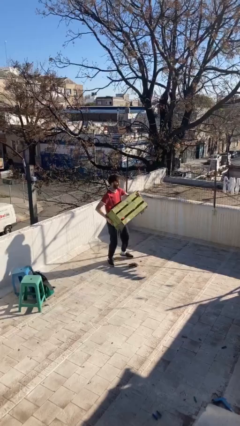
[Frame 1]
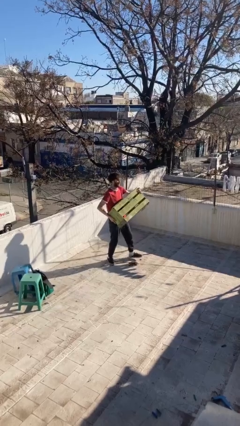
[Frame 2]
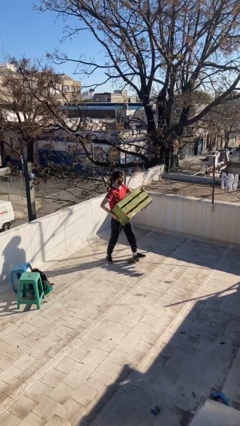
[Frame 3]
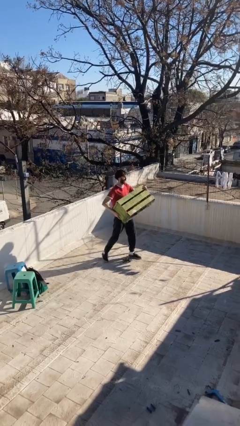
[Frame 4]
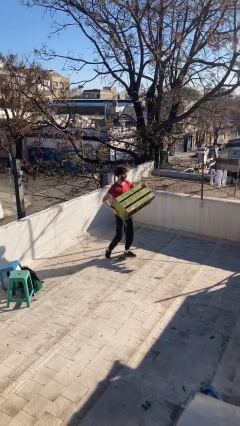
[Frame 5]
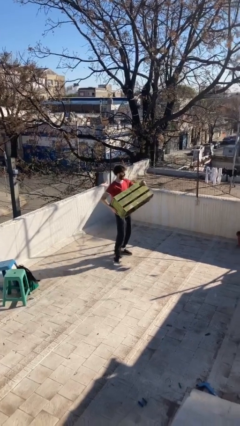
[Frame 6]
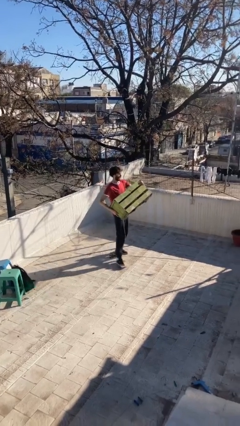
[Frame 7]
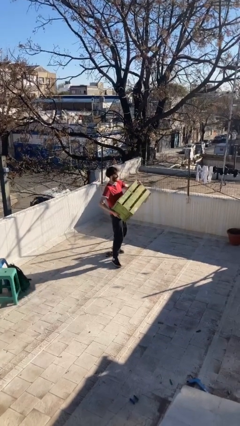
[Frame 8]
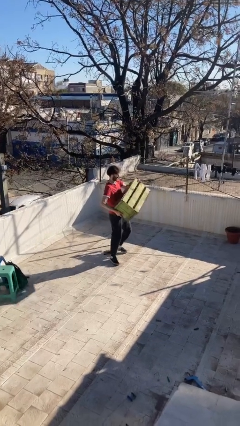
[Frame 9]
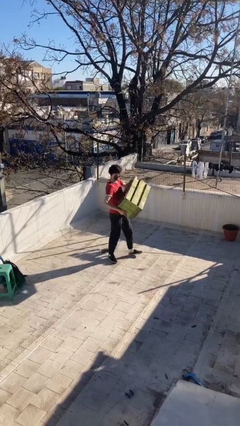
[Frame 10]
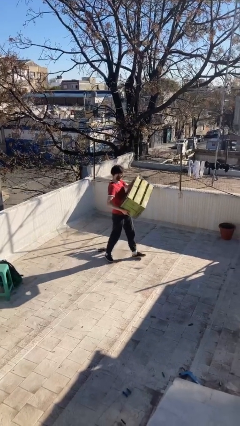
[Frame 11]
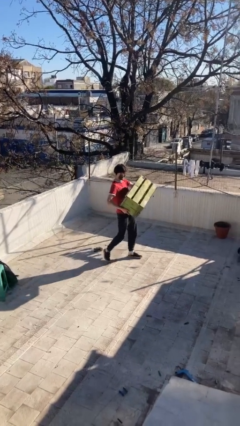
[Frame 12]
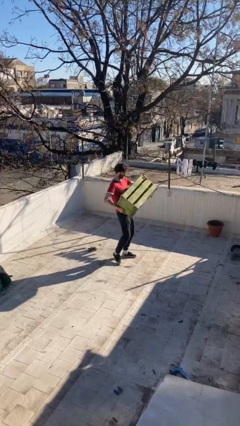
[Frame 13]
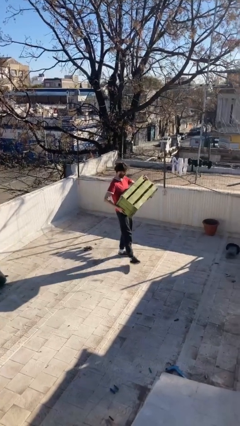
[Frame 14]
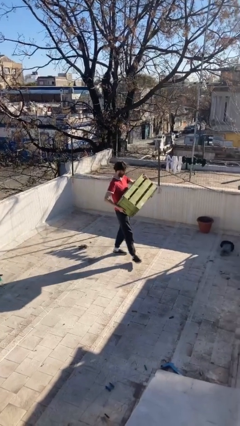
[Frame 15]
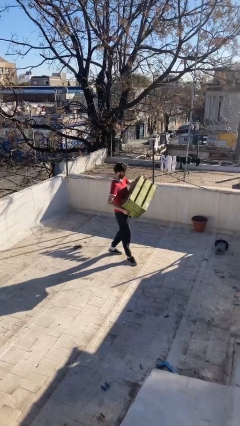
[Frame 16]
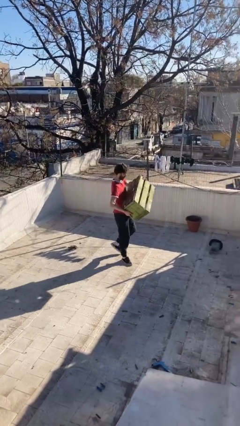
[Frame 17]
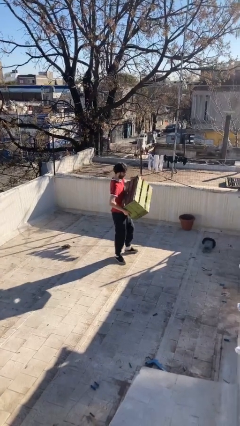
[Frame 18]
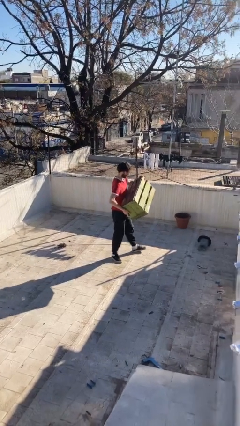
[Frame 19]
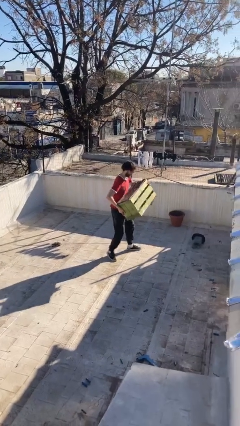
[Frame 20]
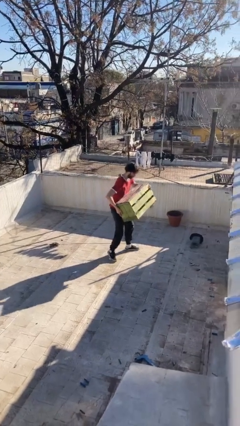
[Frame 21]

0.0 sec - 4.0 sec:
person carries heavy object

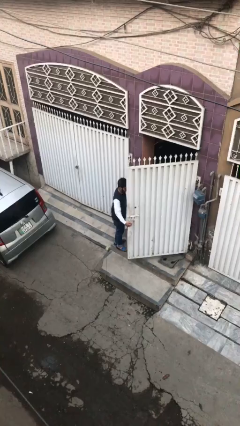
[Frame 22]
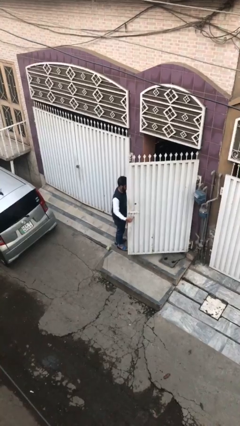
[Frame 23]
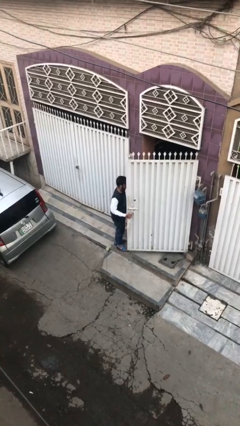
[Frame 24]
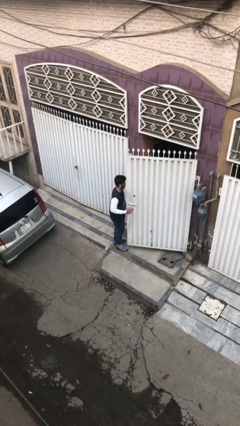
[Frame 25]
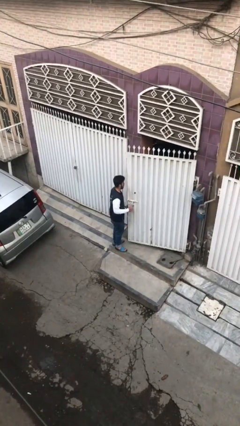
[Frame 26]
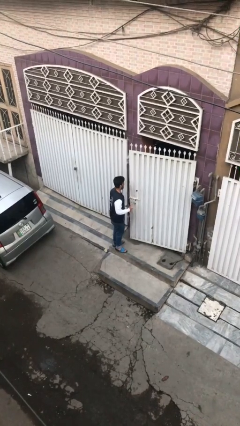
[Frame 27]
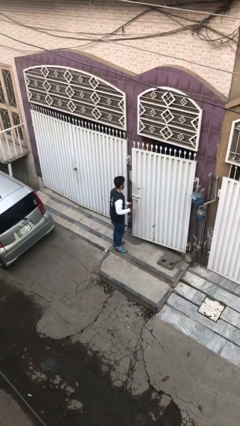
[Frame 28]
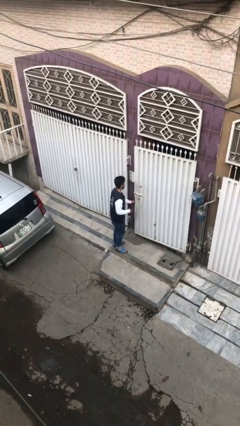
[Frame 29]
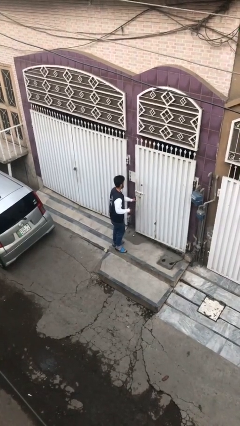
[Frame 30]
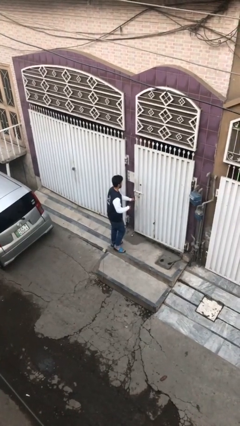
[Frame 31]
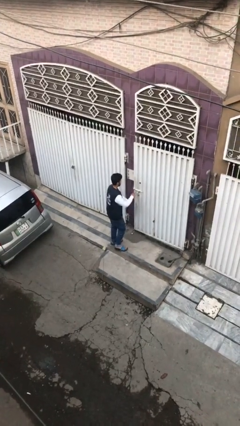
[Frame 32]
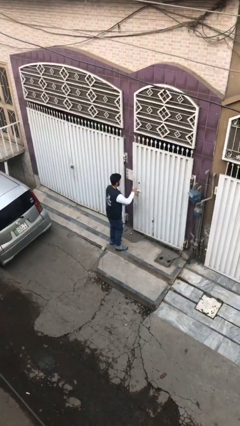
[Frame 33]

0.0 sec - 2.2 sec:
person closes facility door

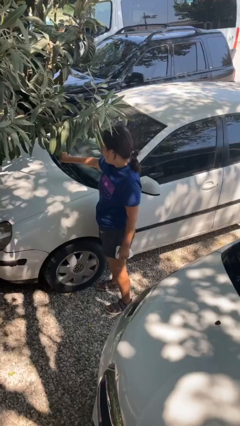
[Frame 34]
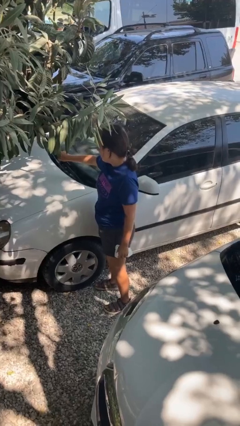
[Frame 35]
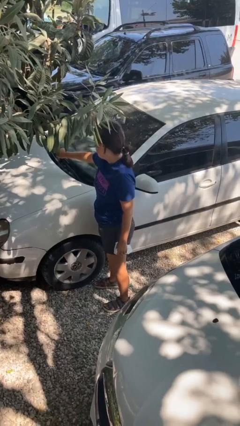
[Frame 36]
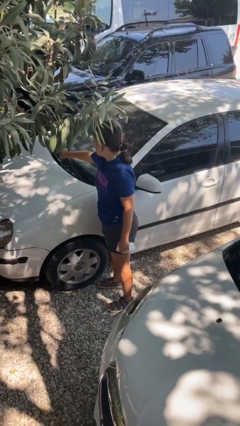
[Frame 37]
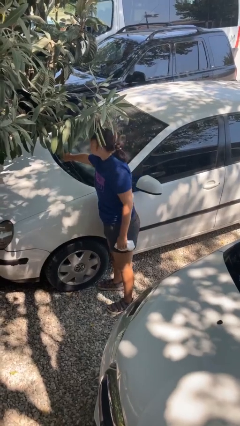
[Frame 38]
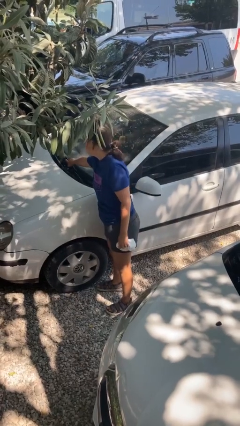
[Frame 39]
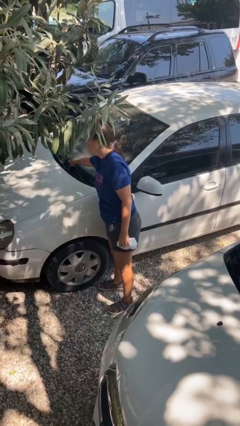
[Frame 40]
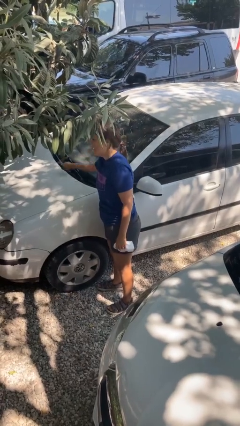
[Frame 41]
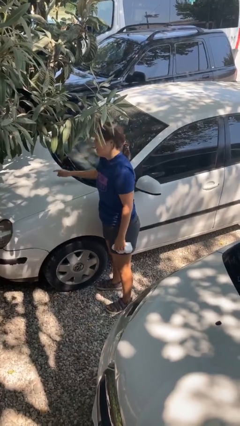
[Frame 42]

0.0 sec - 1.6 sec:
person flips down car wipers

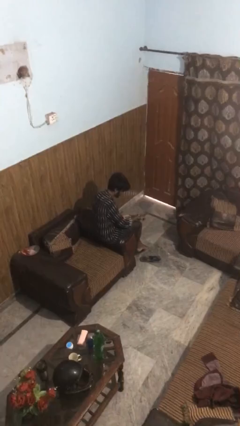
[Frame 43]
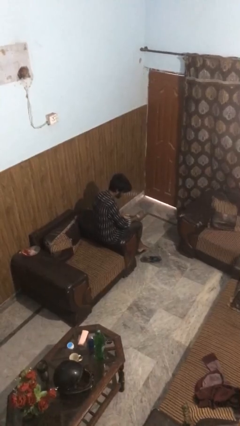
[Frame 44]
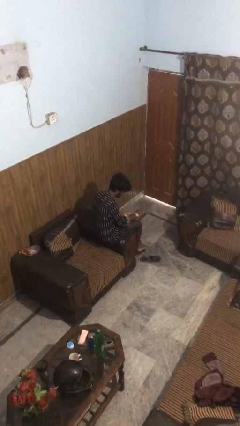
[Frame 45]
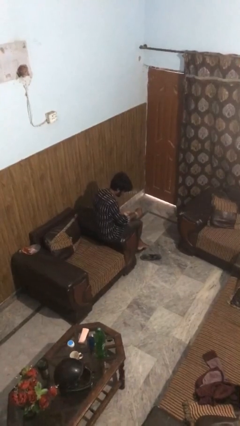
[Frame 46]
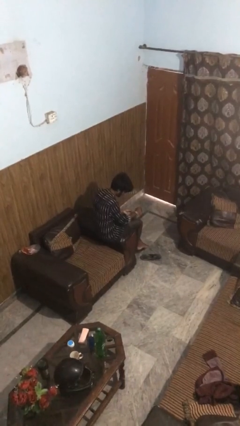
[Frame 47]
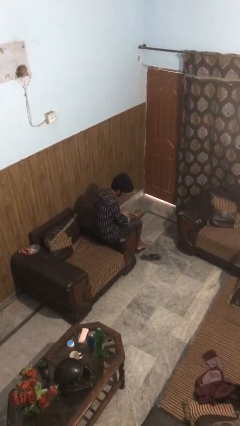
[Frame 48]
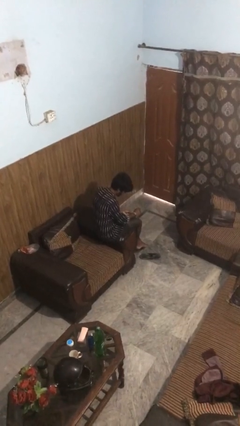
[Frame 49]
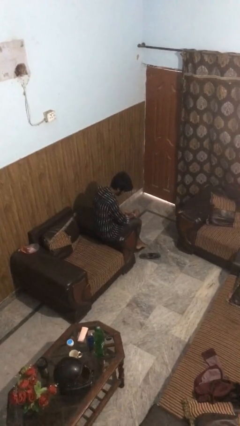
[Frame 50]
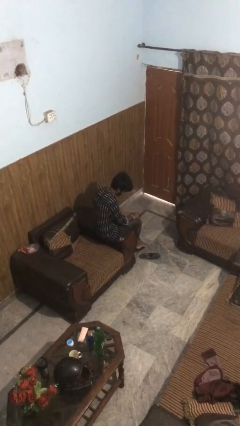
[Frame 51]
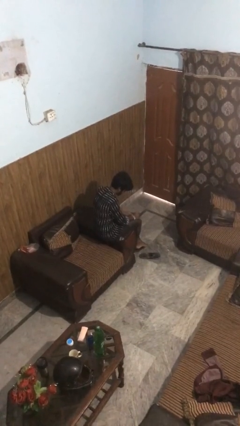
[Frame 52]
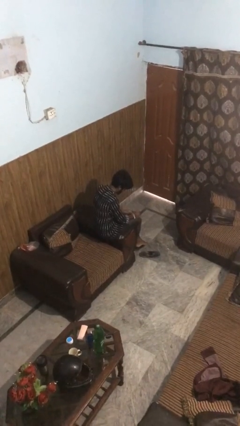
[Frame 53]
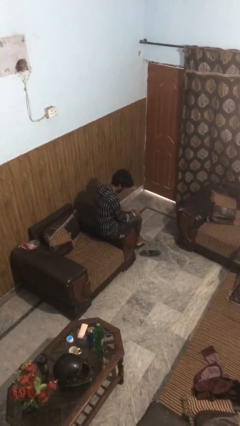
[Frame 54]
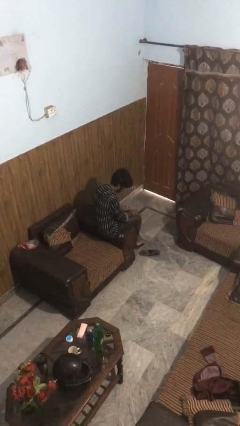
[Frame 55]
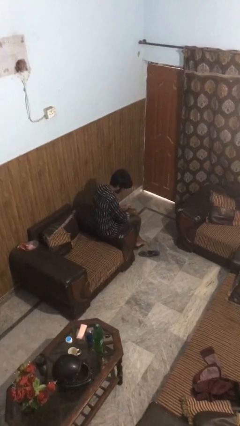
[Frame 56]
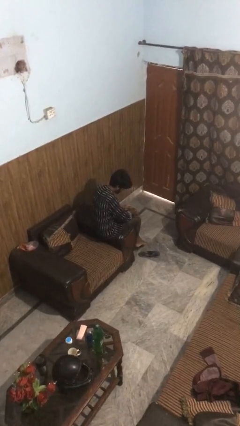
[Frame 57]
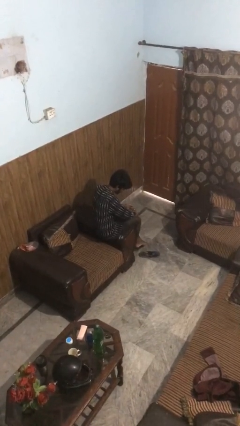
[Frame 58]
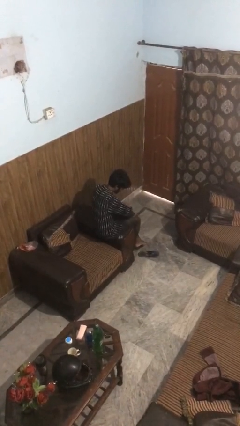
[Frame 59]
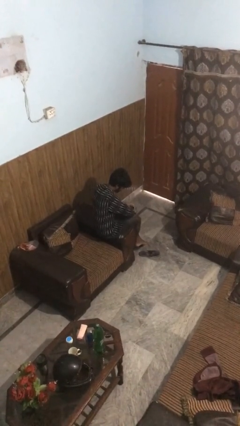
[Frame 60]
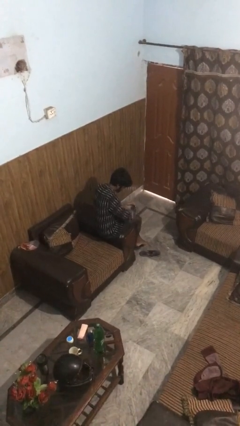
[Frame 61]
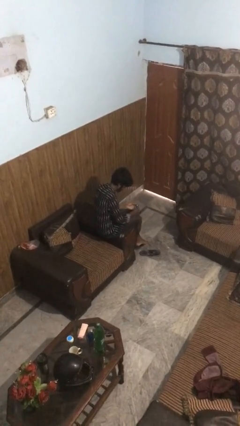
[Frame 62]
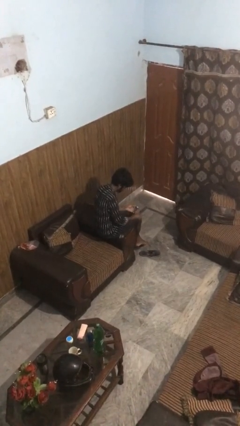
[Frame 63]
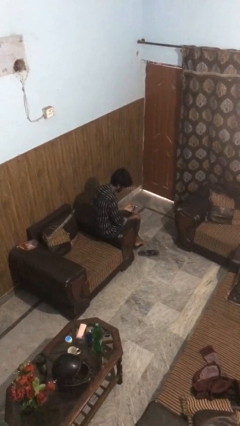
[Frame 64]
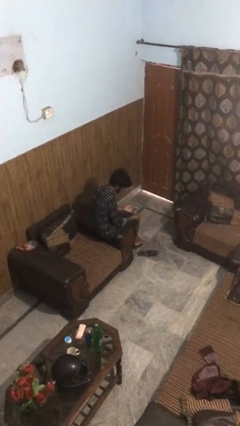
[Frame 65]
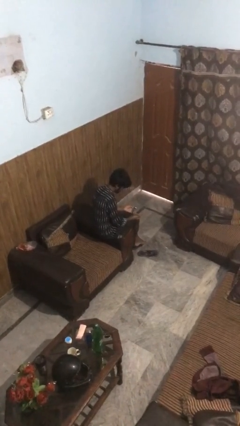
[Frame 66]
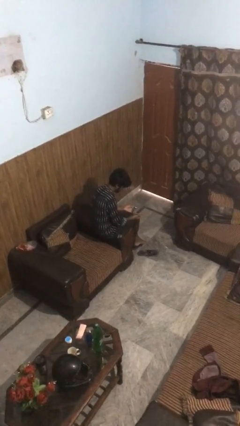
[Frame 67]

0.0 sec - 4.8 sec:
person takes off wristwatch

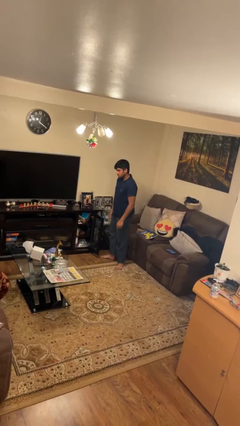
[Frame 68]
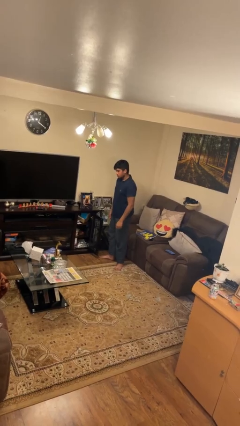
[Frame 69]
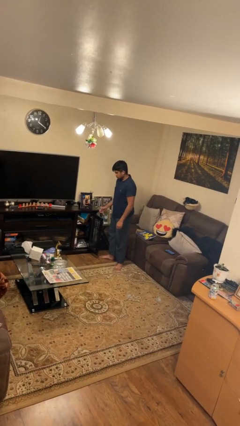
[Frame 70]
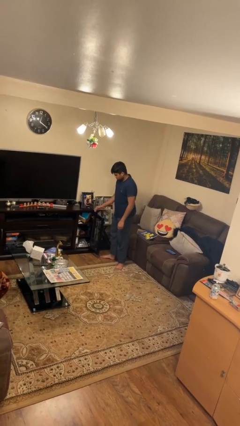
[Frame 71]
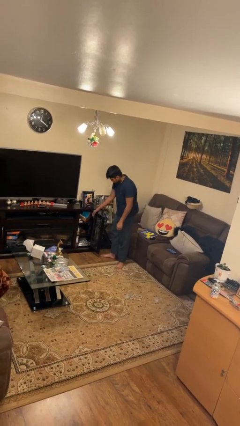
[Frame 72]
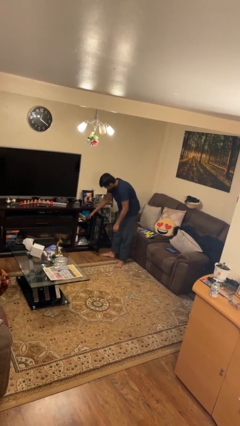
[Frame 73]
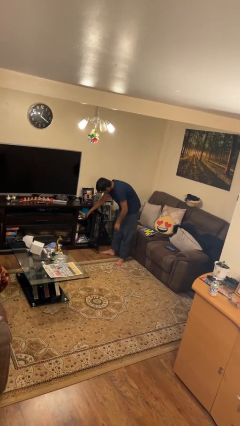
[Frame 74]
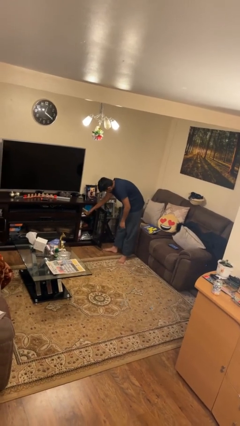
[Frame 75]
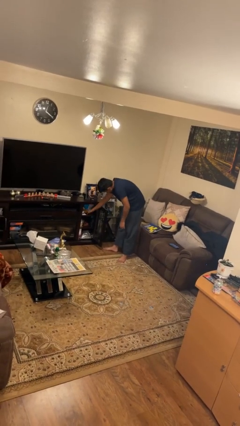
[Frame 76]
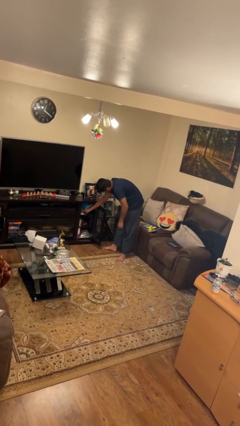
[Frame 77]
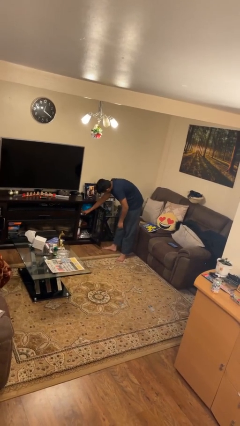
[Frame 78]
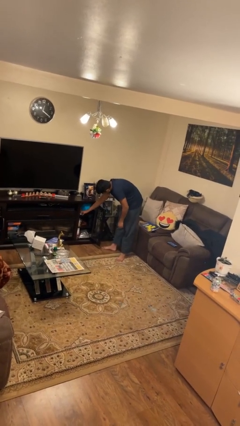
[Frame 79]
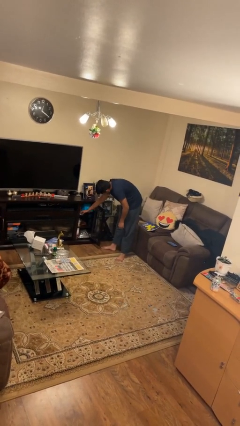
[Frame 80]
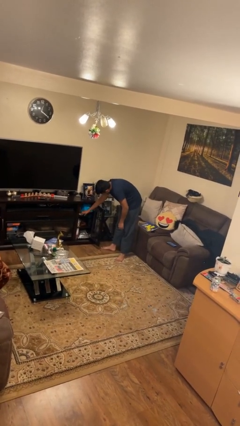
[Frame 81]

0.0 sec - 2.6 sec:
person searches in cabinet

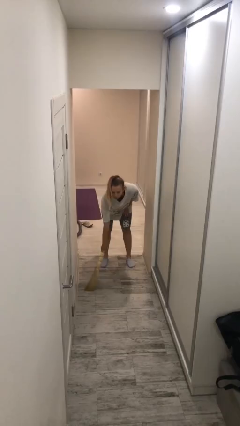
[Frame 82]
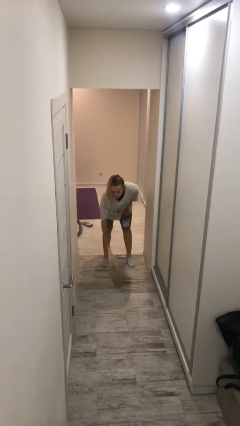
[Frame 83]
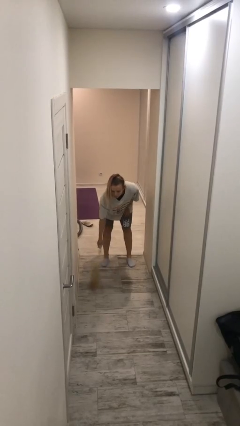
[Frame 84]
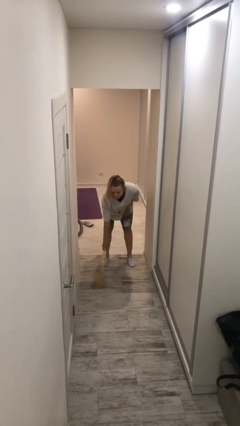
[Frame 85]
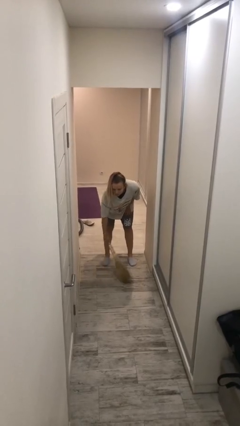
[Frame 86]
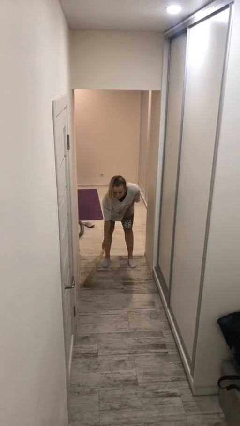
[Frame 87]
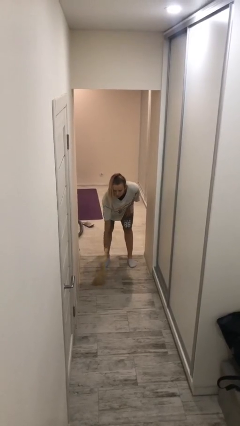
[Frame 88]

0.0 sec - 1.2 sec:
person sweeps floor

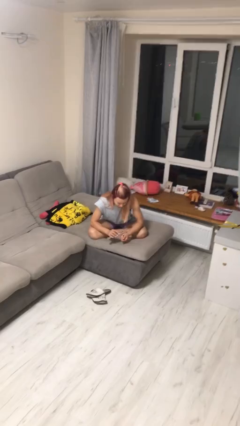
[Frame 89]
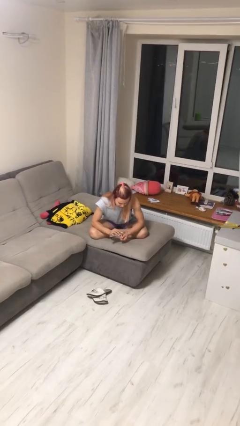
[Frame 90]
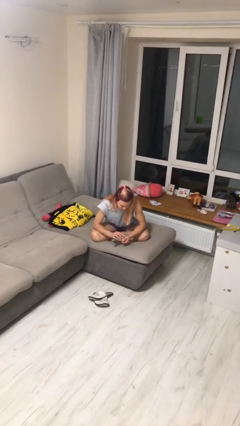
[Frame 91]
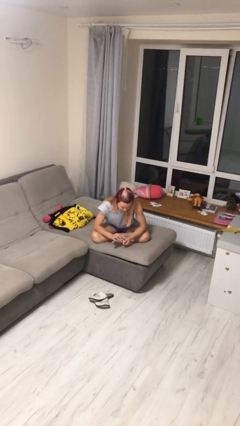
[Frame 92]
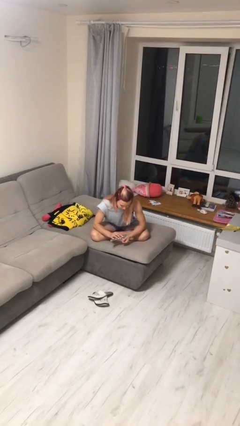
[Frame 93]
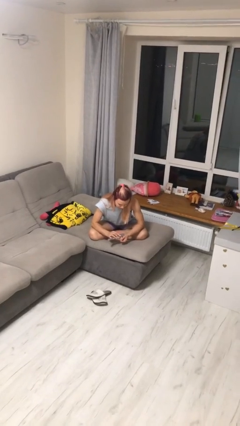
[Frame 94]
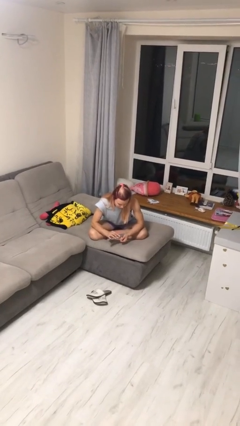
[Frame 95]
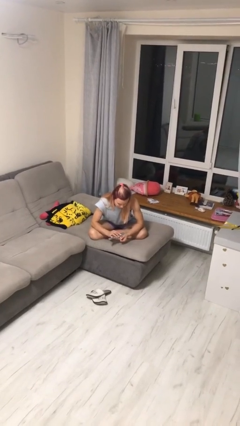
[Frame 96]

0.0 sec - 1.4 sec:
person files fingernails
